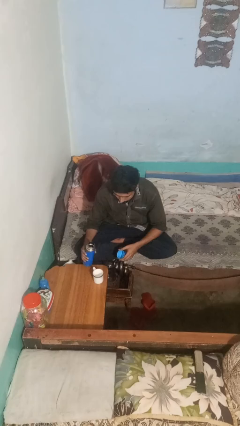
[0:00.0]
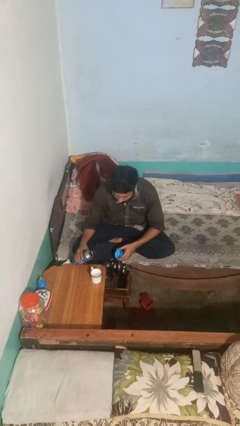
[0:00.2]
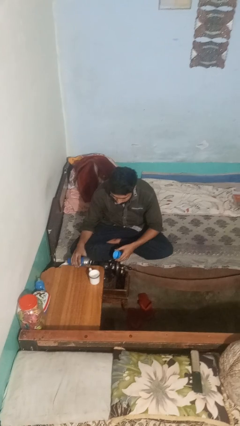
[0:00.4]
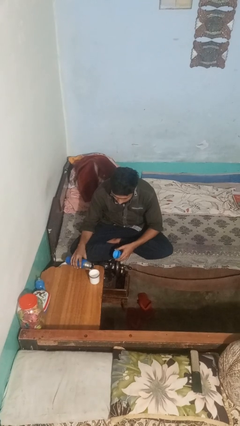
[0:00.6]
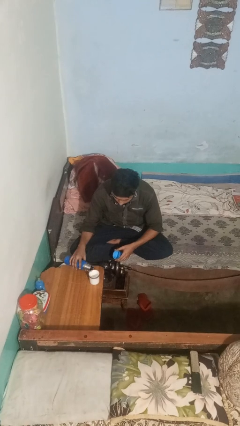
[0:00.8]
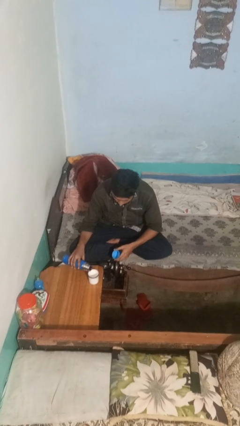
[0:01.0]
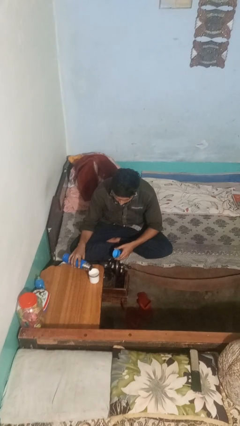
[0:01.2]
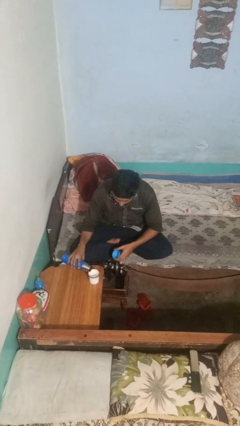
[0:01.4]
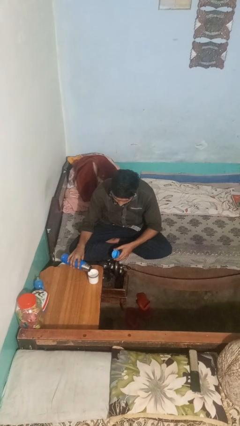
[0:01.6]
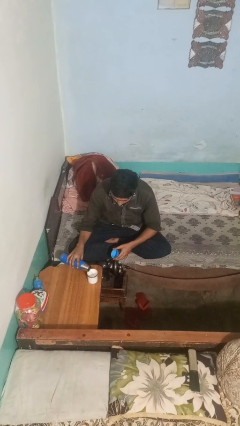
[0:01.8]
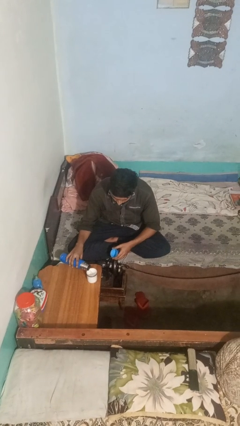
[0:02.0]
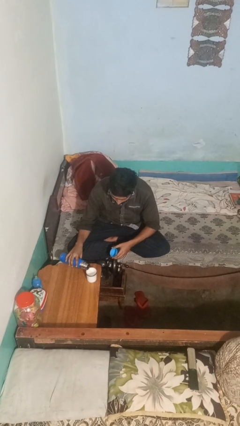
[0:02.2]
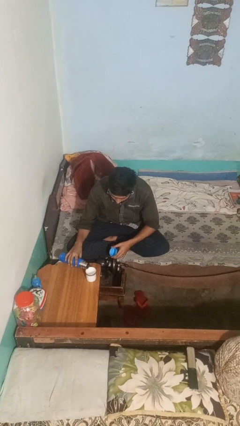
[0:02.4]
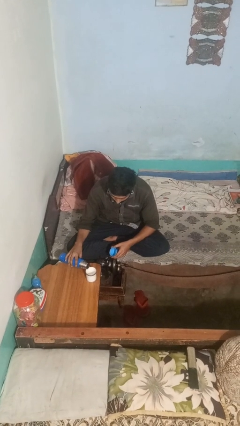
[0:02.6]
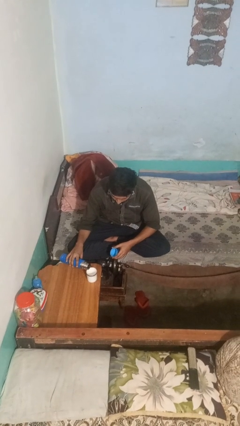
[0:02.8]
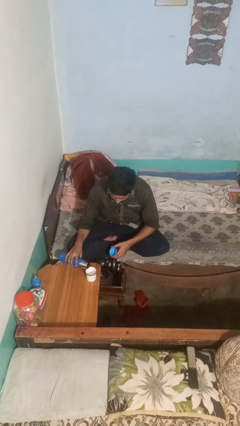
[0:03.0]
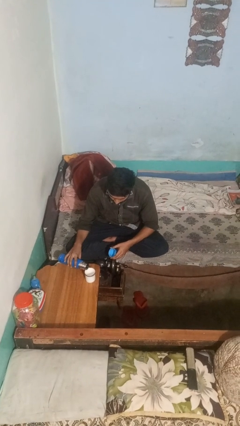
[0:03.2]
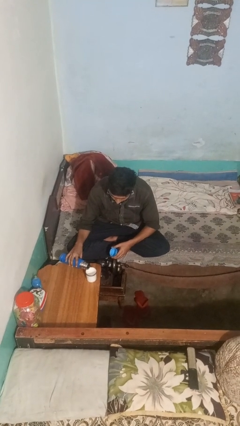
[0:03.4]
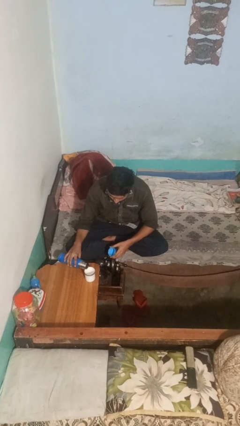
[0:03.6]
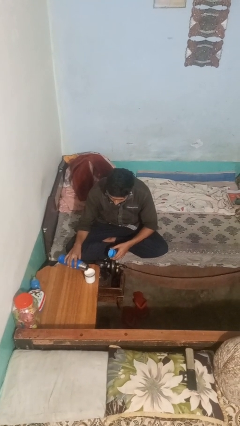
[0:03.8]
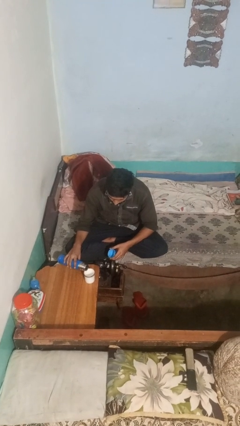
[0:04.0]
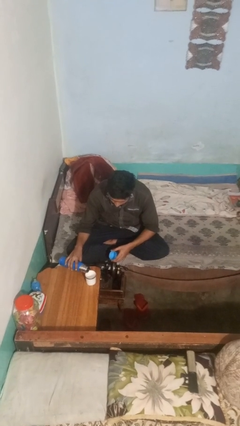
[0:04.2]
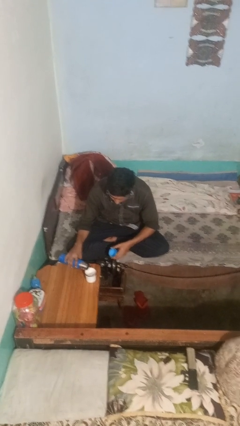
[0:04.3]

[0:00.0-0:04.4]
person pours liquid into cup

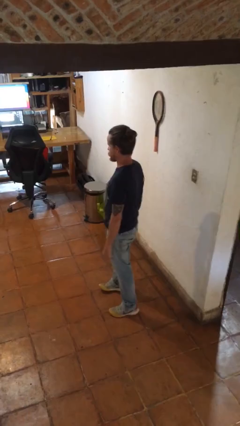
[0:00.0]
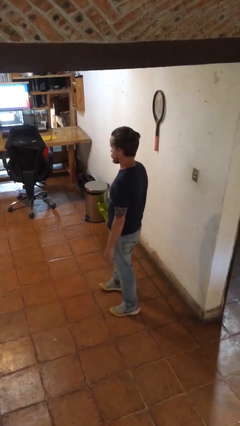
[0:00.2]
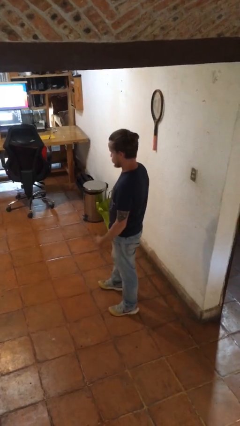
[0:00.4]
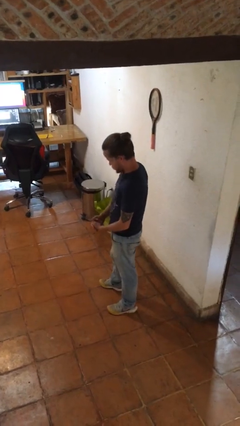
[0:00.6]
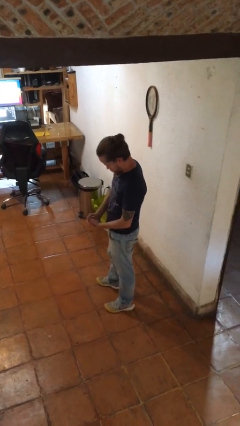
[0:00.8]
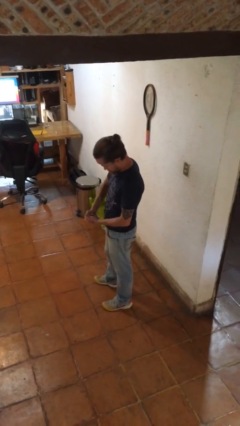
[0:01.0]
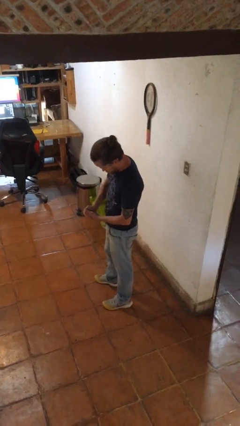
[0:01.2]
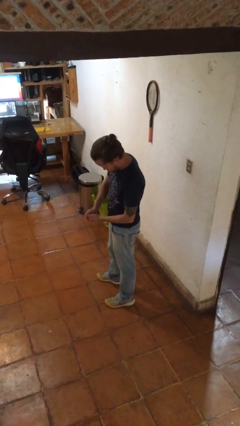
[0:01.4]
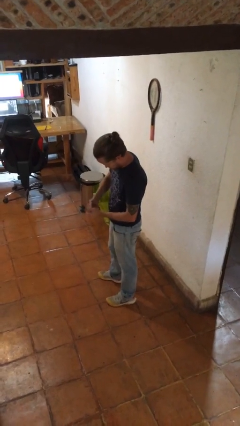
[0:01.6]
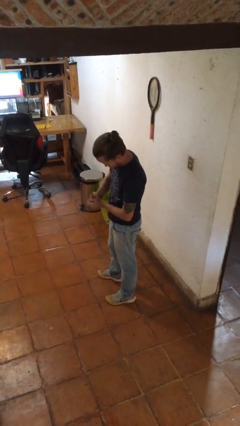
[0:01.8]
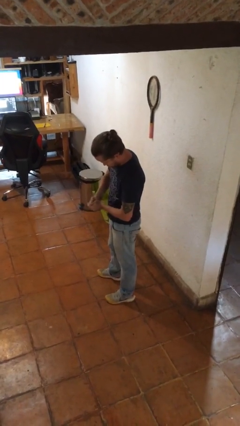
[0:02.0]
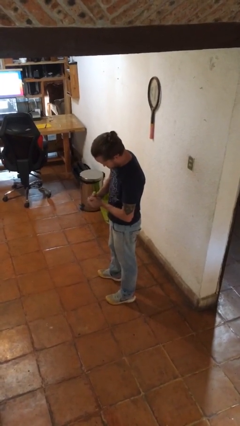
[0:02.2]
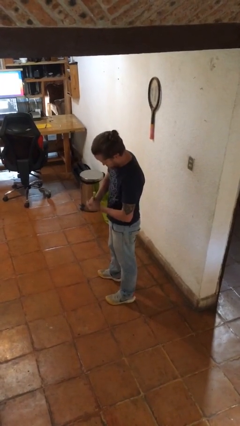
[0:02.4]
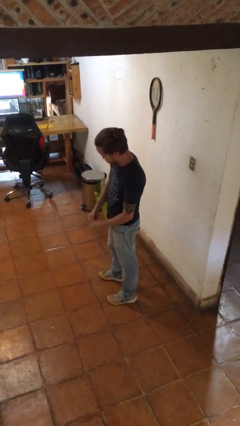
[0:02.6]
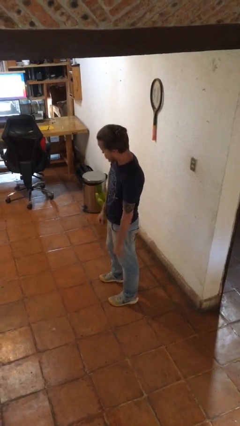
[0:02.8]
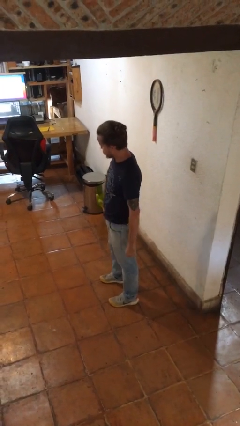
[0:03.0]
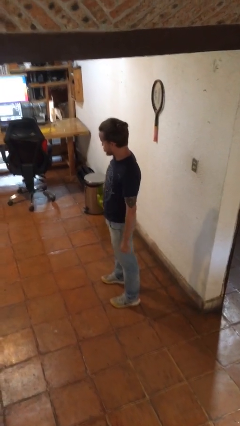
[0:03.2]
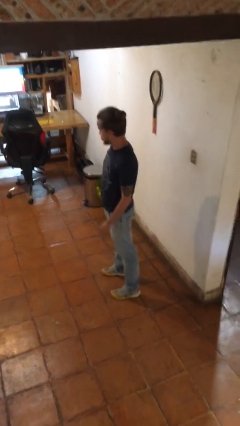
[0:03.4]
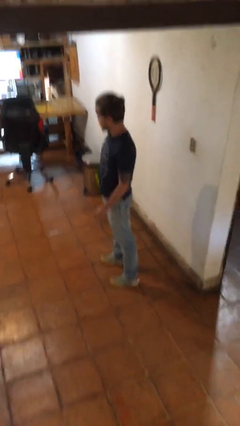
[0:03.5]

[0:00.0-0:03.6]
person cracks knuckles

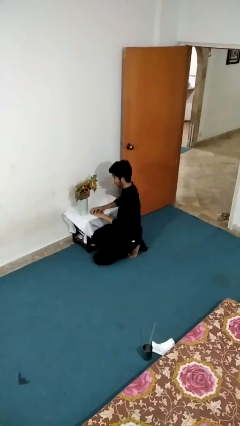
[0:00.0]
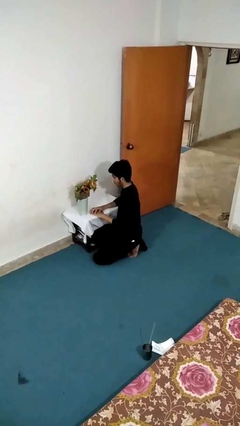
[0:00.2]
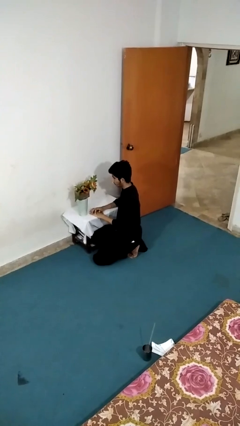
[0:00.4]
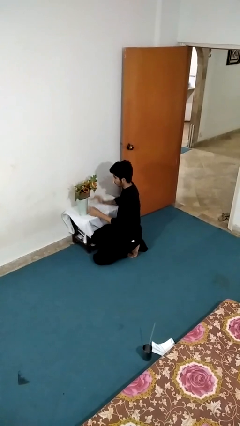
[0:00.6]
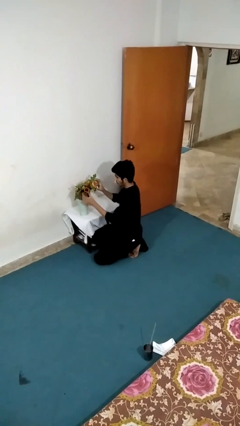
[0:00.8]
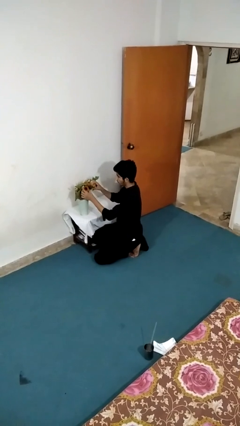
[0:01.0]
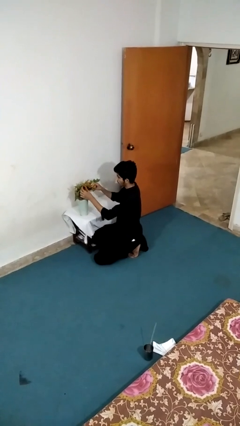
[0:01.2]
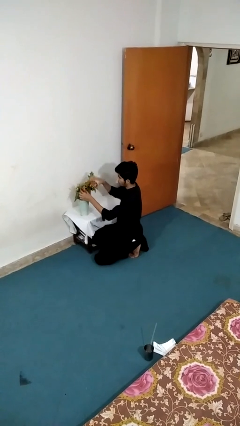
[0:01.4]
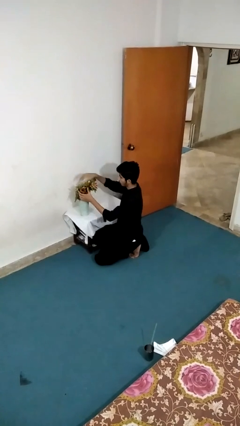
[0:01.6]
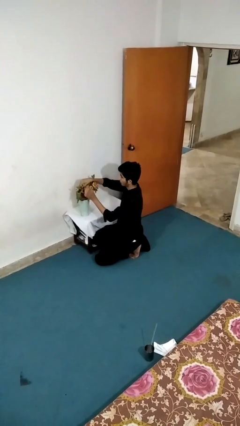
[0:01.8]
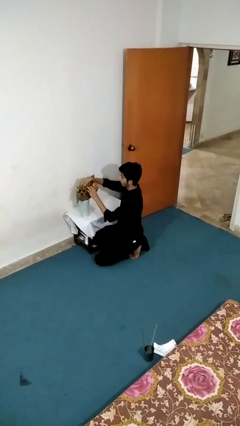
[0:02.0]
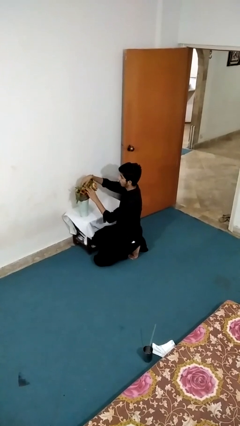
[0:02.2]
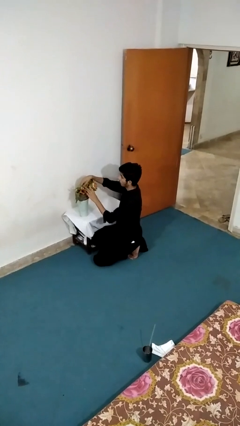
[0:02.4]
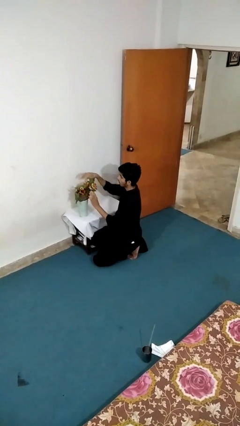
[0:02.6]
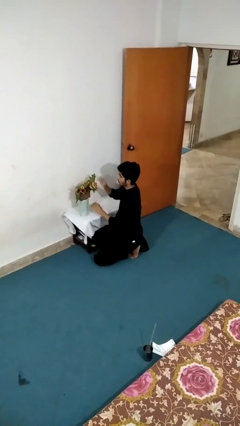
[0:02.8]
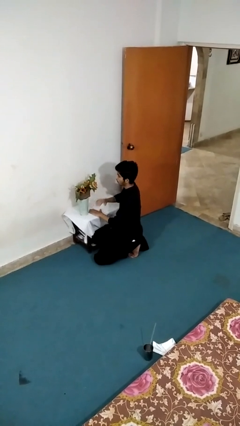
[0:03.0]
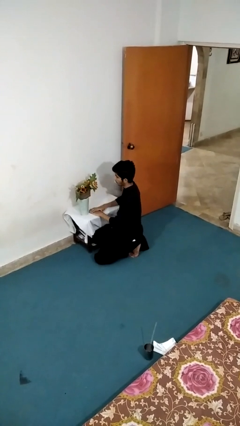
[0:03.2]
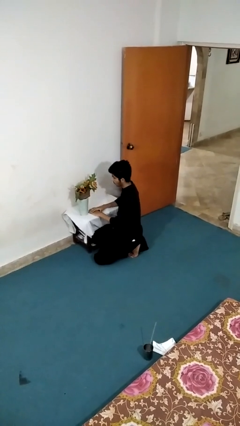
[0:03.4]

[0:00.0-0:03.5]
person arranges flowers in vase

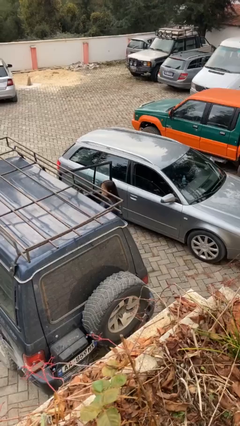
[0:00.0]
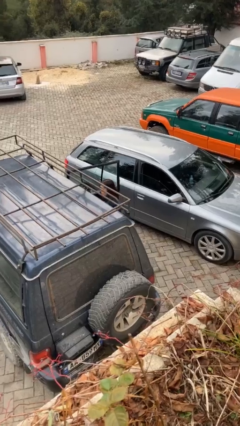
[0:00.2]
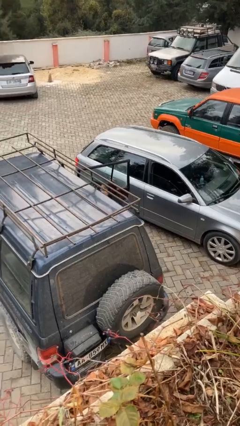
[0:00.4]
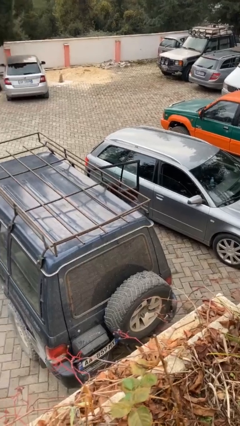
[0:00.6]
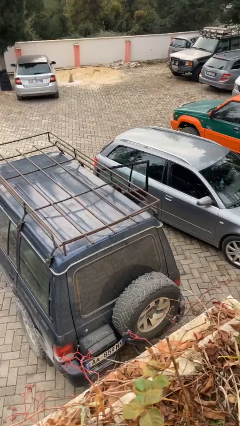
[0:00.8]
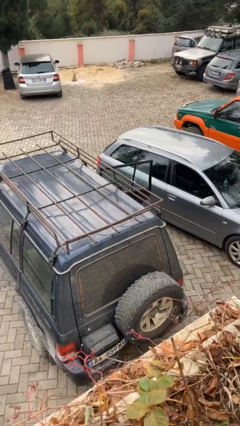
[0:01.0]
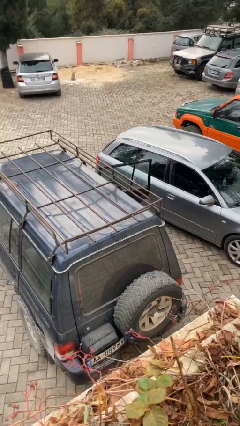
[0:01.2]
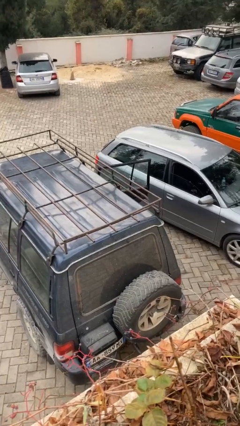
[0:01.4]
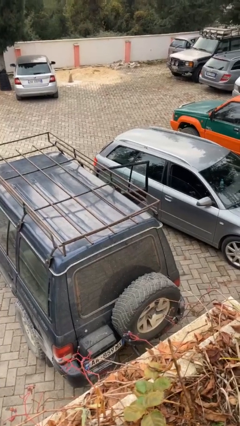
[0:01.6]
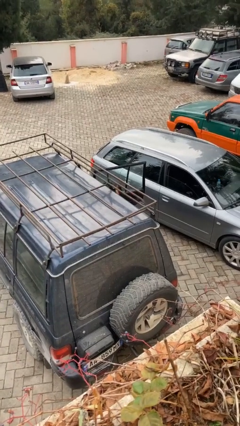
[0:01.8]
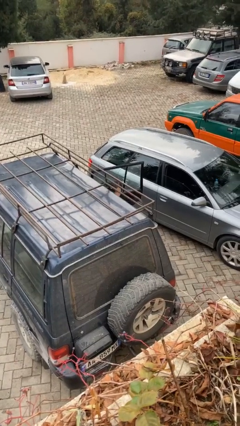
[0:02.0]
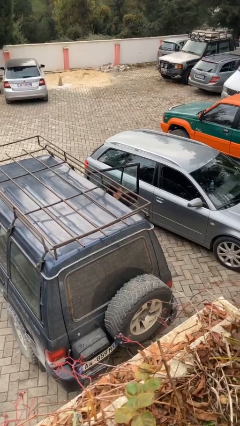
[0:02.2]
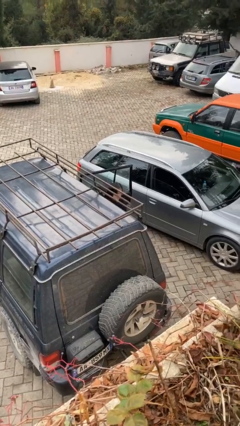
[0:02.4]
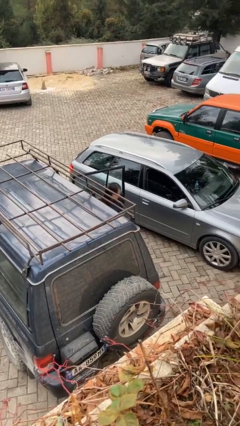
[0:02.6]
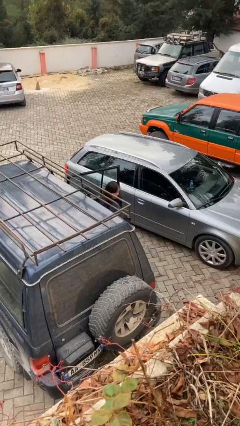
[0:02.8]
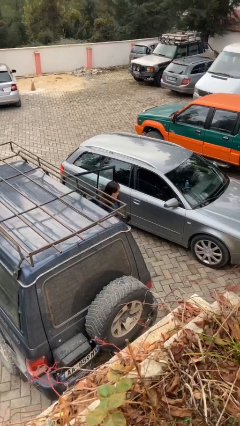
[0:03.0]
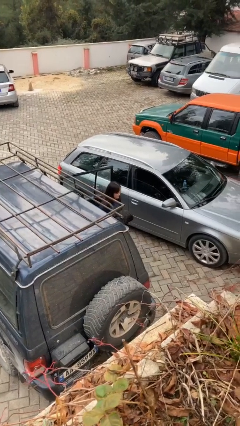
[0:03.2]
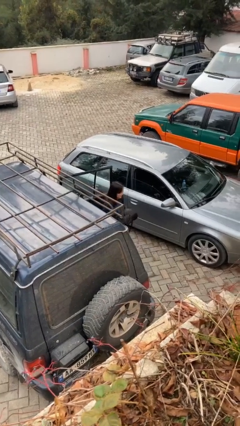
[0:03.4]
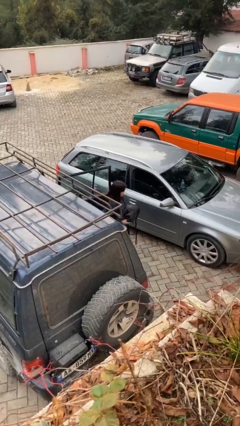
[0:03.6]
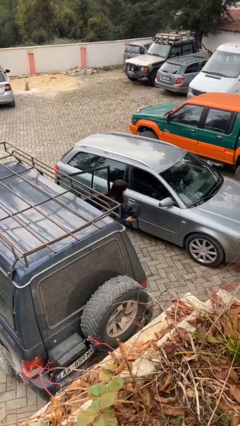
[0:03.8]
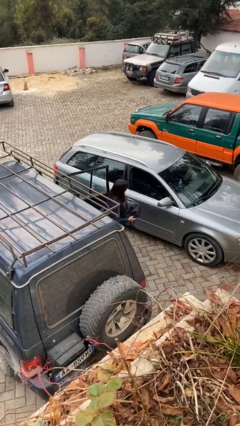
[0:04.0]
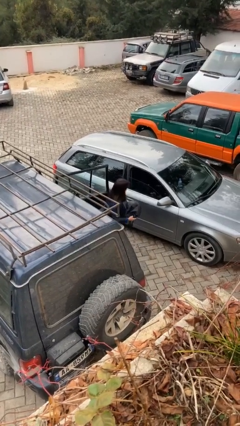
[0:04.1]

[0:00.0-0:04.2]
person unloads car

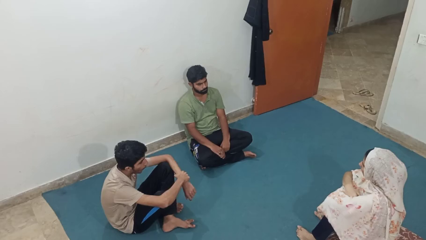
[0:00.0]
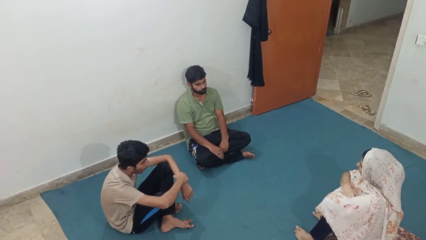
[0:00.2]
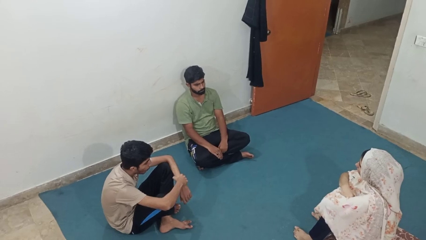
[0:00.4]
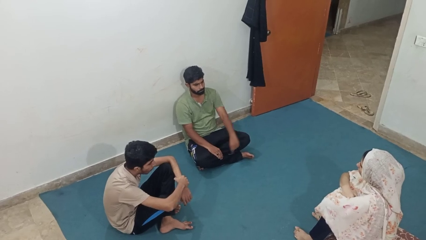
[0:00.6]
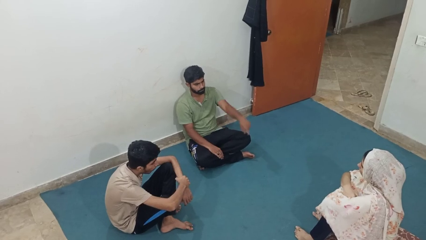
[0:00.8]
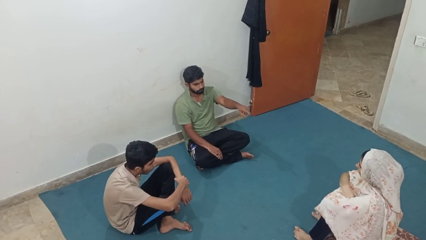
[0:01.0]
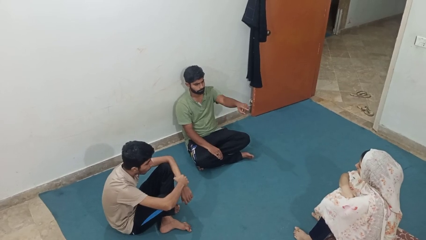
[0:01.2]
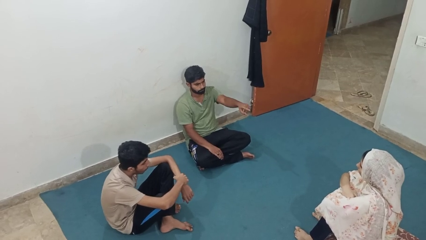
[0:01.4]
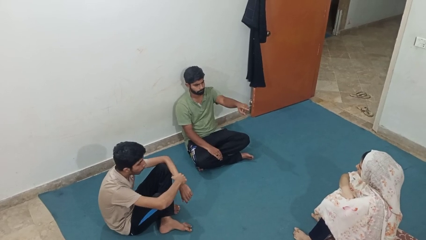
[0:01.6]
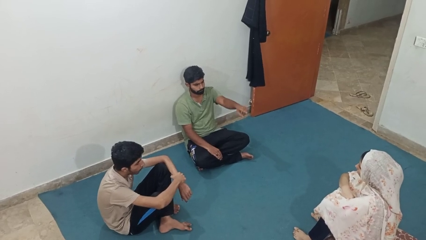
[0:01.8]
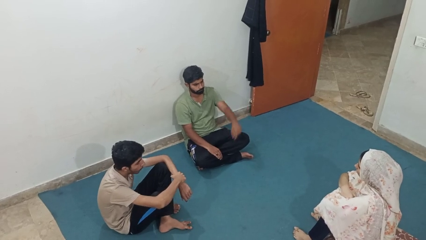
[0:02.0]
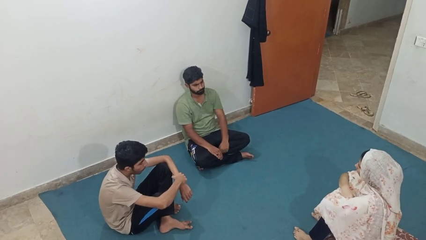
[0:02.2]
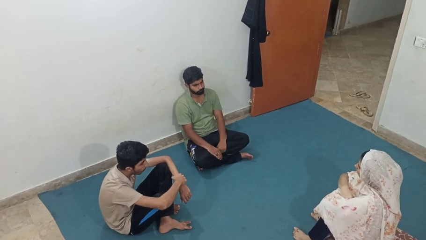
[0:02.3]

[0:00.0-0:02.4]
person points at person
